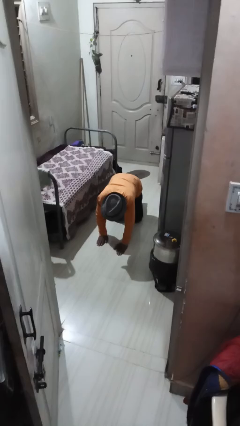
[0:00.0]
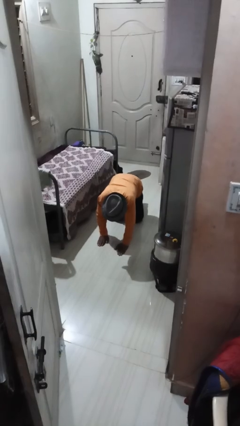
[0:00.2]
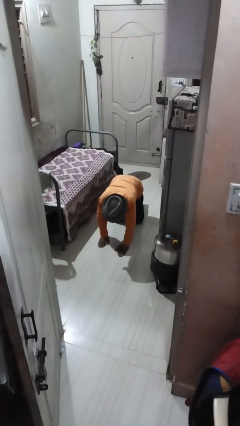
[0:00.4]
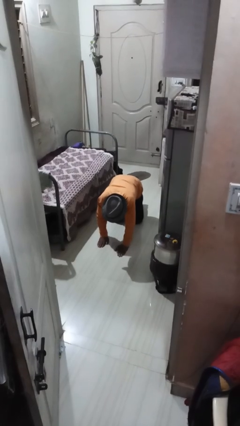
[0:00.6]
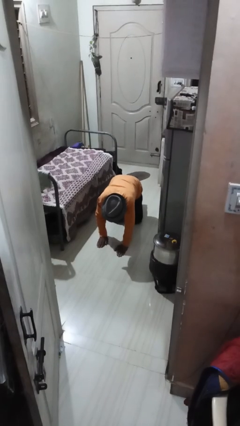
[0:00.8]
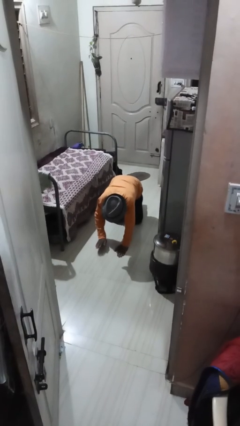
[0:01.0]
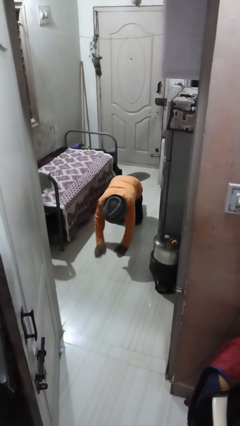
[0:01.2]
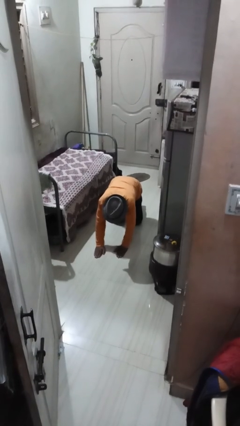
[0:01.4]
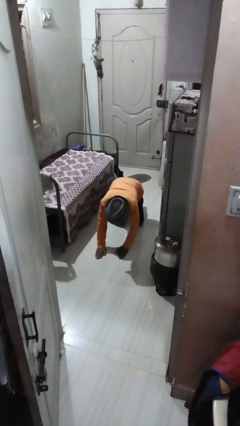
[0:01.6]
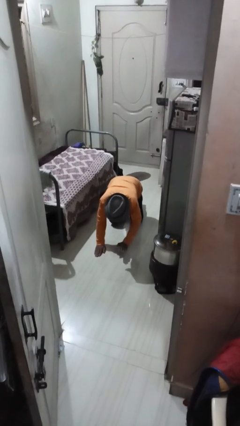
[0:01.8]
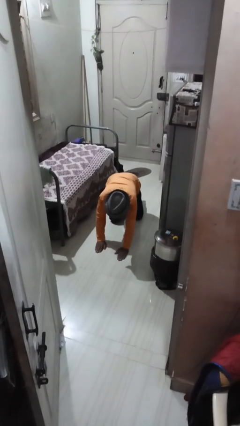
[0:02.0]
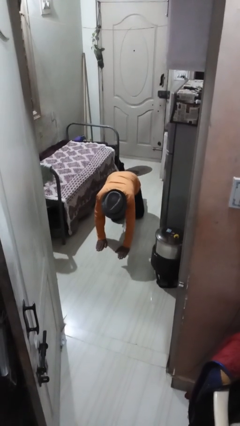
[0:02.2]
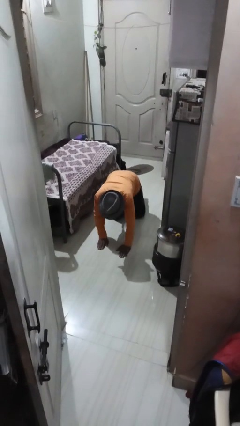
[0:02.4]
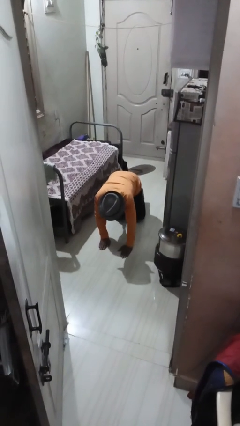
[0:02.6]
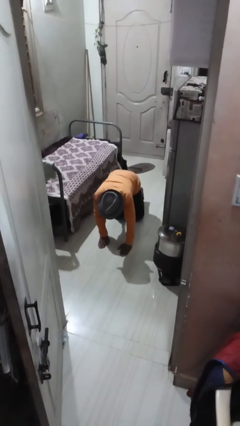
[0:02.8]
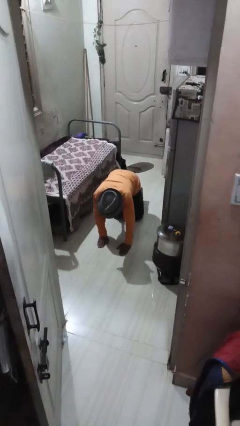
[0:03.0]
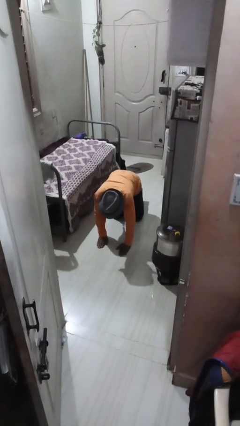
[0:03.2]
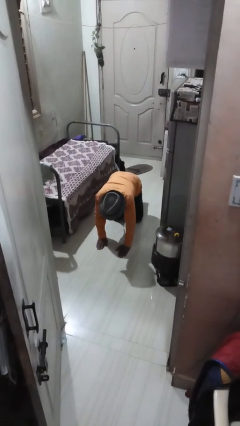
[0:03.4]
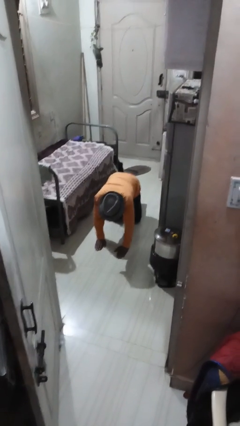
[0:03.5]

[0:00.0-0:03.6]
person crawls

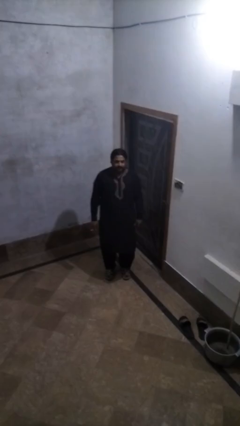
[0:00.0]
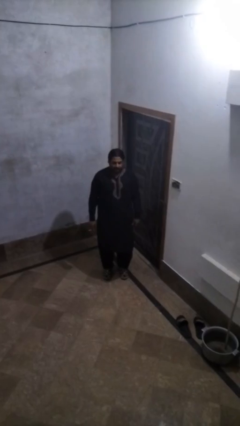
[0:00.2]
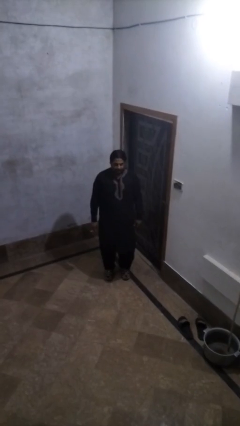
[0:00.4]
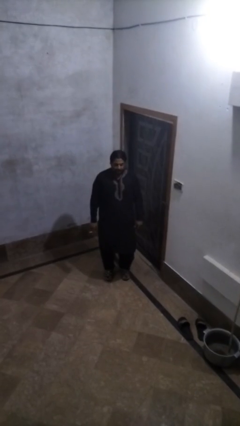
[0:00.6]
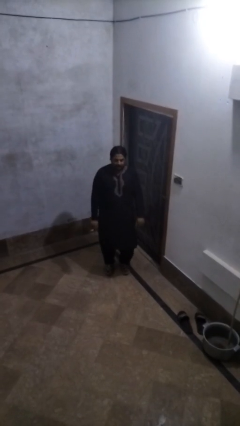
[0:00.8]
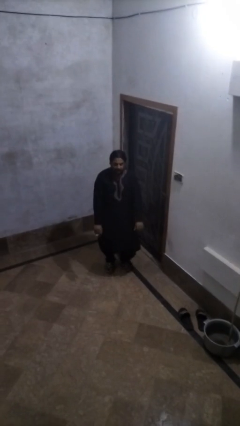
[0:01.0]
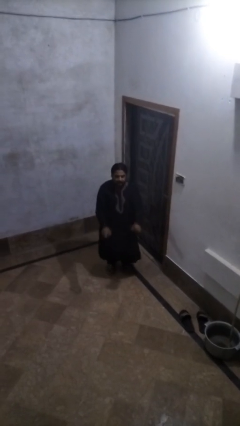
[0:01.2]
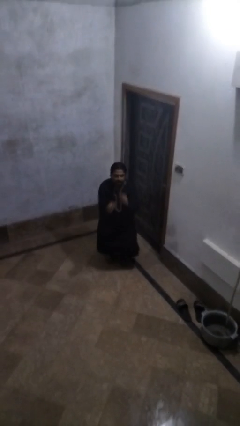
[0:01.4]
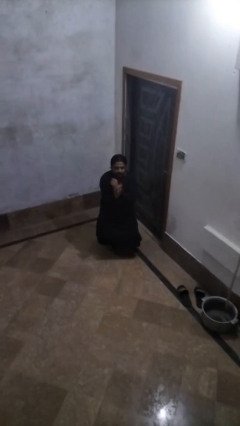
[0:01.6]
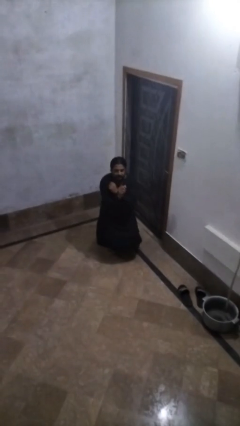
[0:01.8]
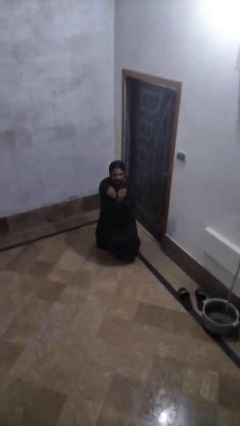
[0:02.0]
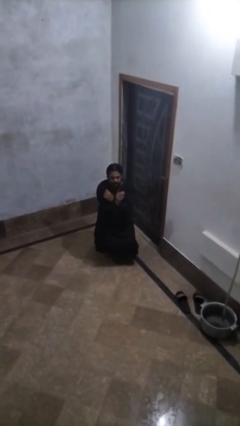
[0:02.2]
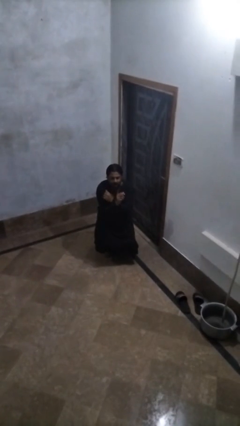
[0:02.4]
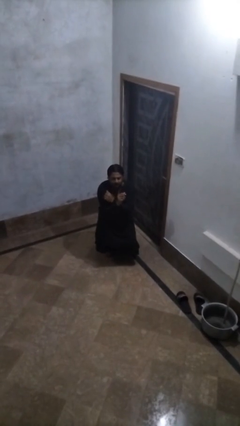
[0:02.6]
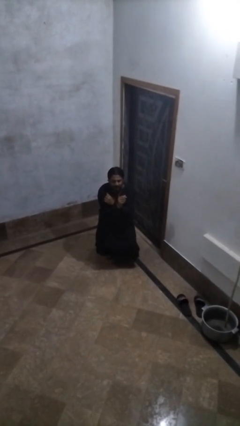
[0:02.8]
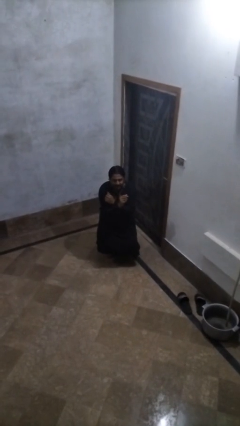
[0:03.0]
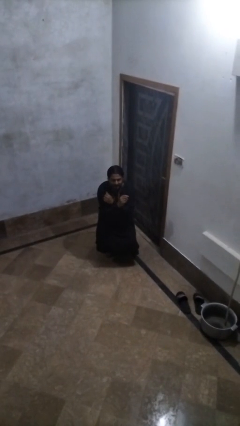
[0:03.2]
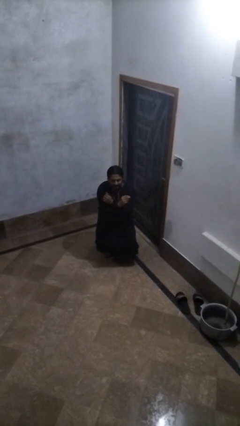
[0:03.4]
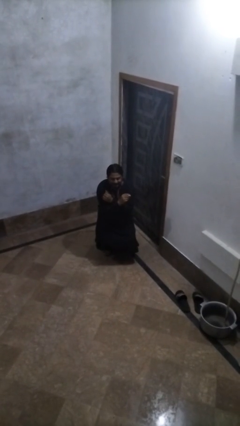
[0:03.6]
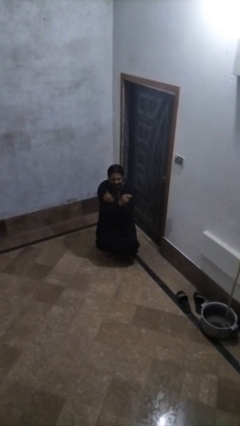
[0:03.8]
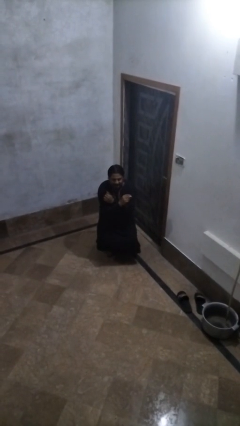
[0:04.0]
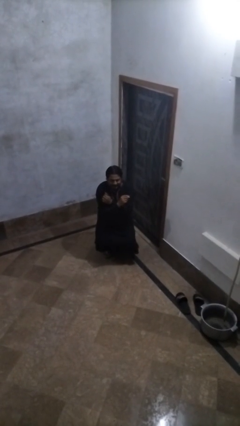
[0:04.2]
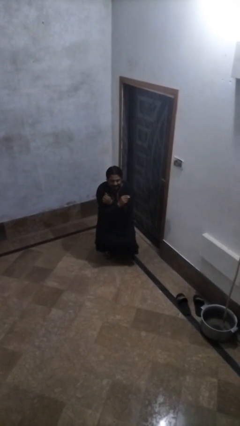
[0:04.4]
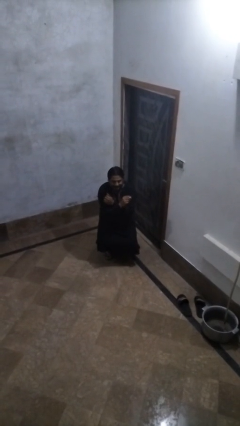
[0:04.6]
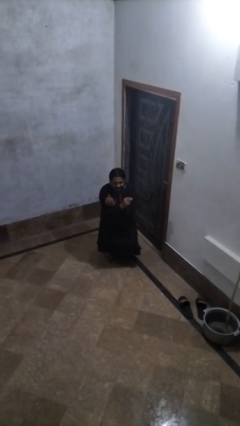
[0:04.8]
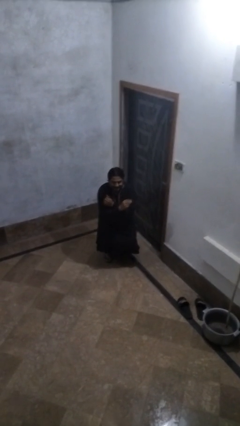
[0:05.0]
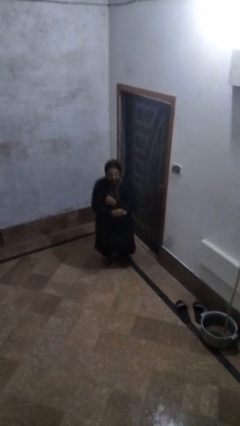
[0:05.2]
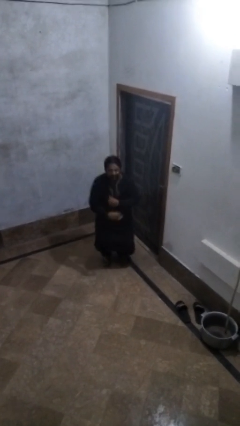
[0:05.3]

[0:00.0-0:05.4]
person squats

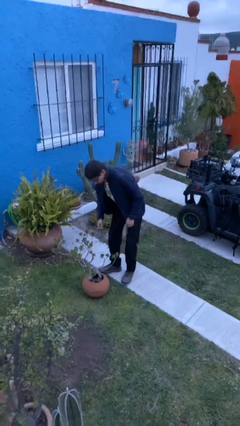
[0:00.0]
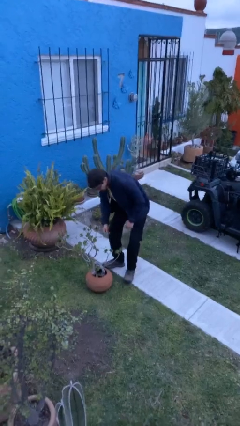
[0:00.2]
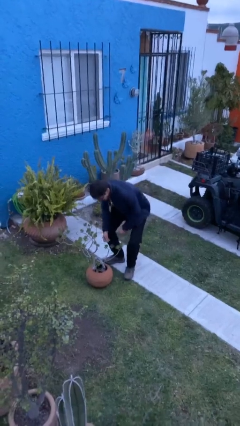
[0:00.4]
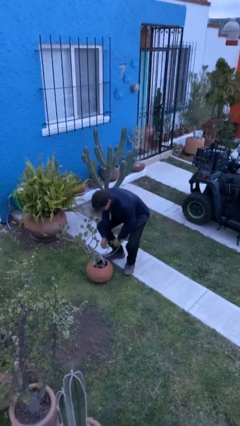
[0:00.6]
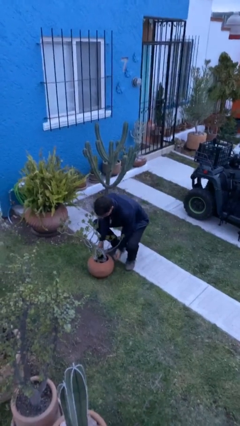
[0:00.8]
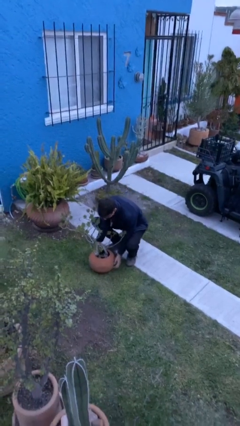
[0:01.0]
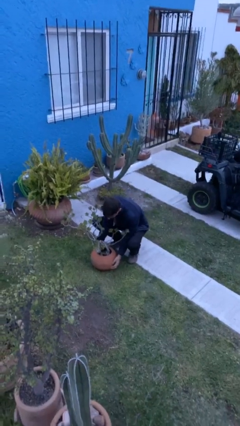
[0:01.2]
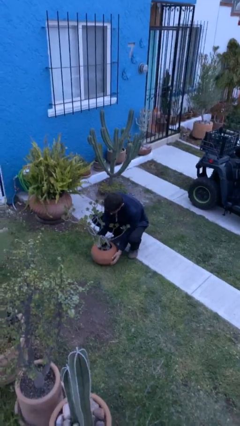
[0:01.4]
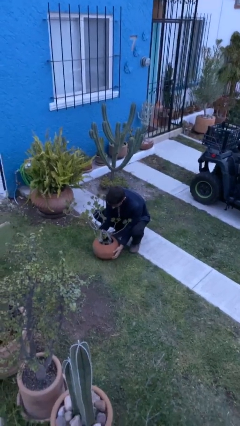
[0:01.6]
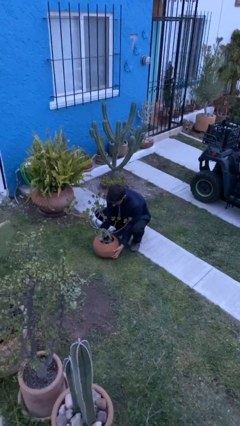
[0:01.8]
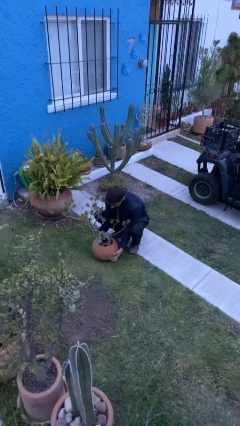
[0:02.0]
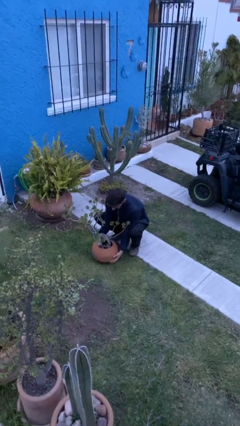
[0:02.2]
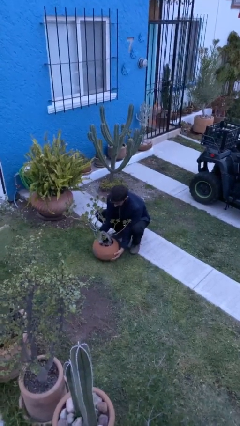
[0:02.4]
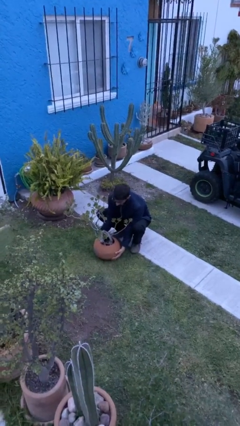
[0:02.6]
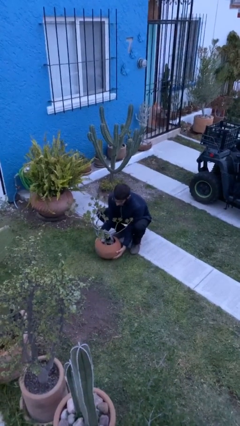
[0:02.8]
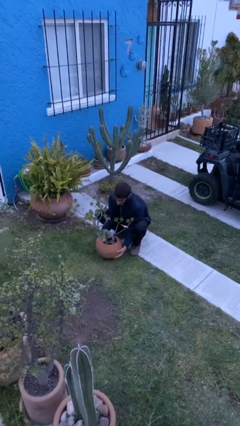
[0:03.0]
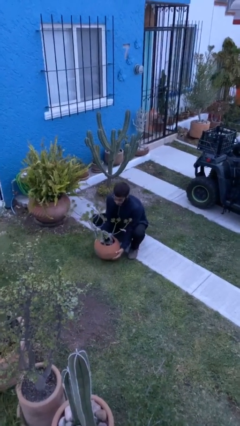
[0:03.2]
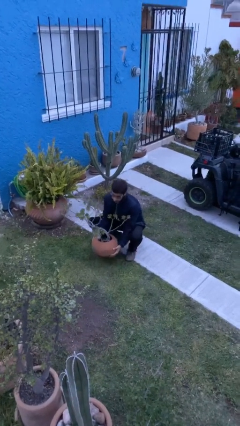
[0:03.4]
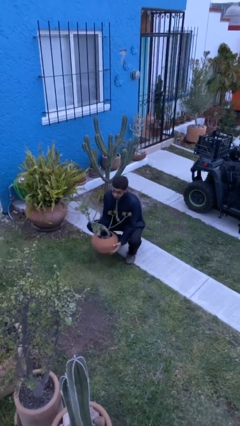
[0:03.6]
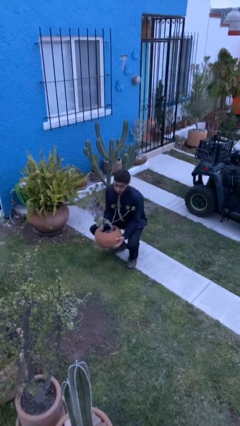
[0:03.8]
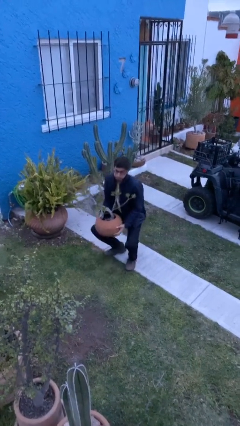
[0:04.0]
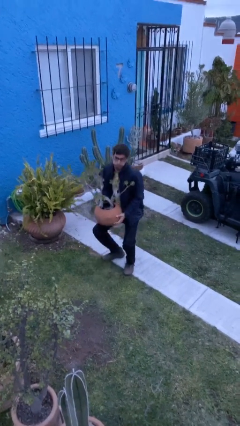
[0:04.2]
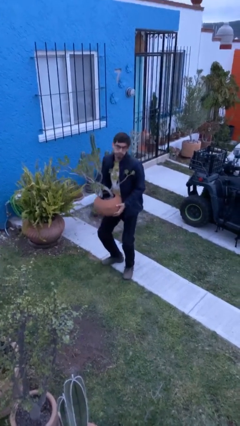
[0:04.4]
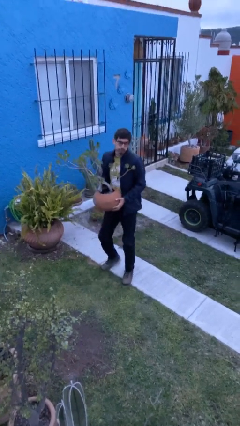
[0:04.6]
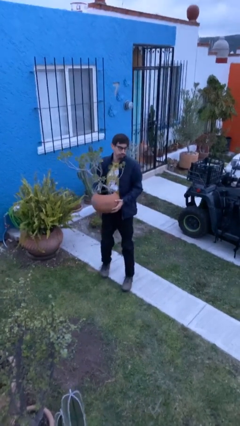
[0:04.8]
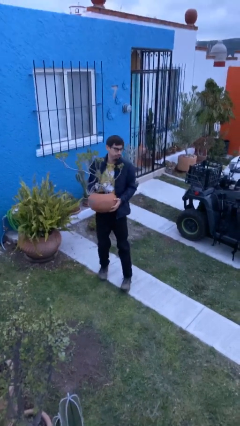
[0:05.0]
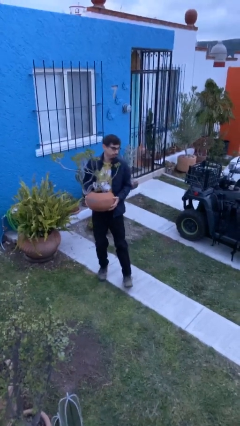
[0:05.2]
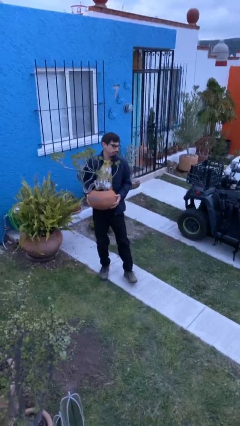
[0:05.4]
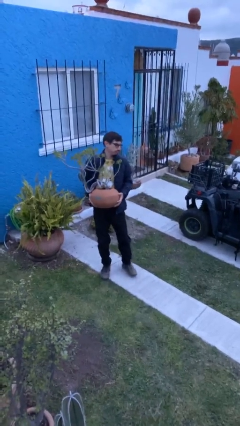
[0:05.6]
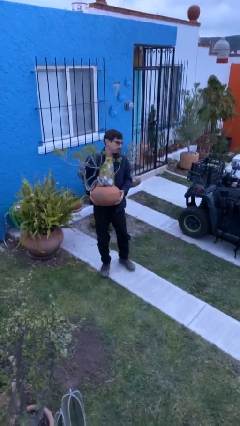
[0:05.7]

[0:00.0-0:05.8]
person picks up object from floor

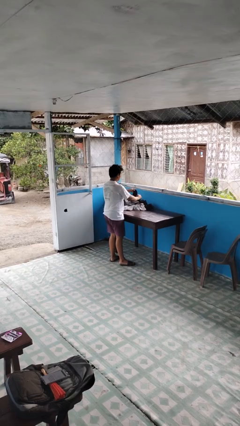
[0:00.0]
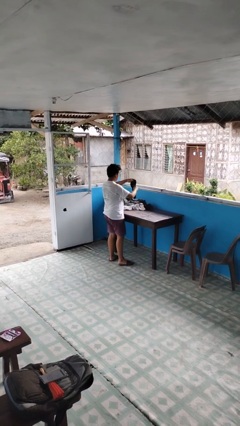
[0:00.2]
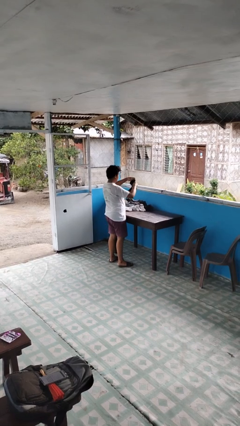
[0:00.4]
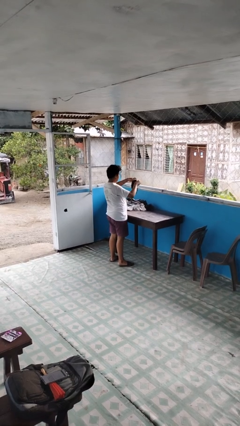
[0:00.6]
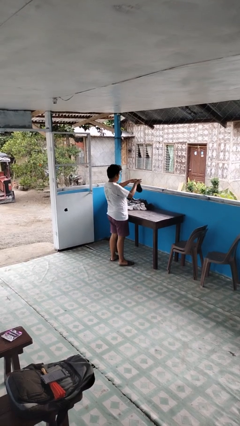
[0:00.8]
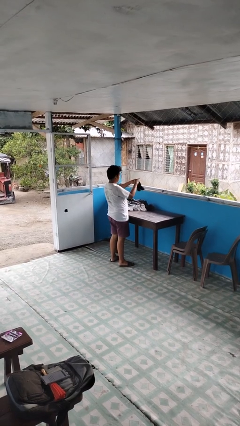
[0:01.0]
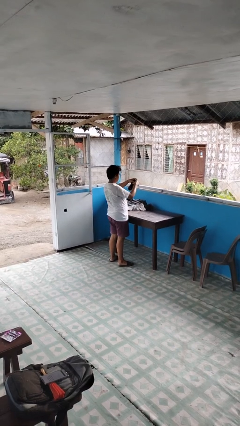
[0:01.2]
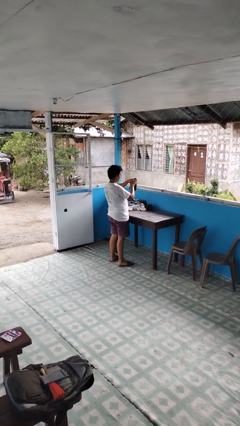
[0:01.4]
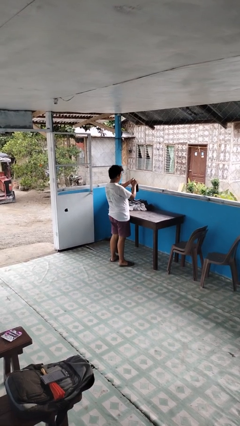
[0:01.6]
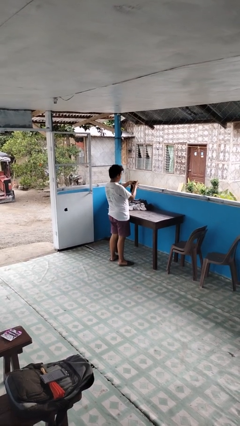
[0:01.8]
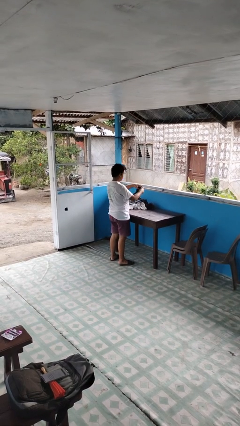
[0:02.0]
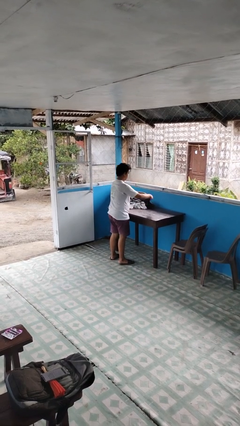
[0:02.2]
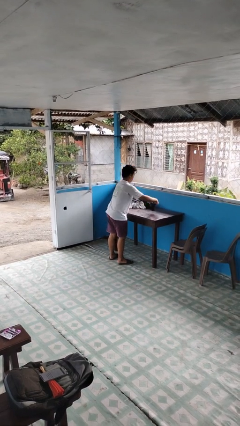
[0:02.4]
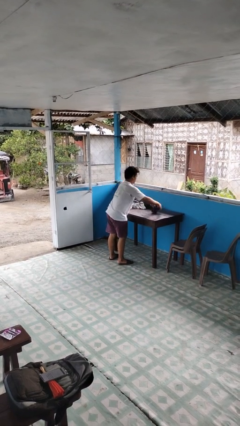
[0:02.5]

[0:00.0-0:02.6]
person folds socks

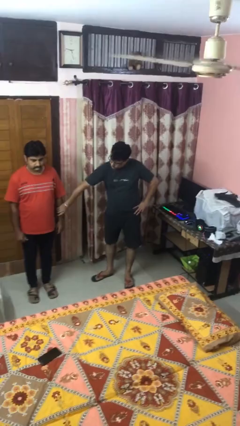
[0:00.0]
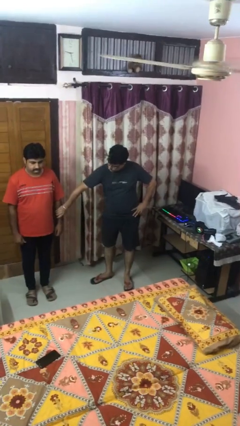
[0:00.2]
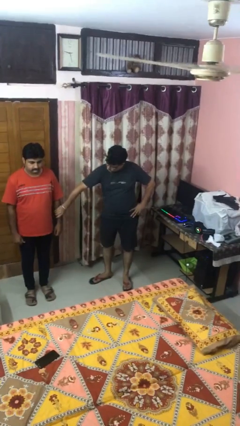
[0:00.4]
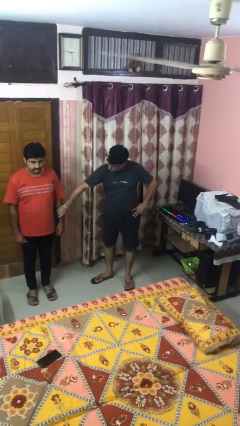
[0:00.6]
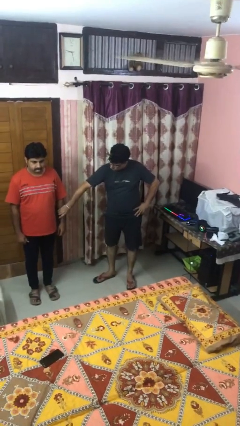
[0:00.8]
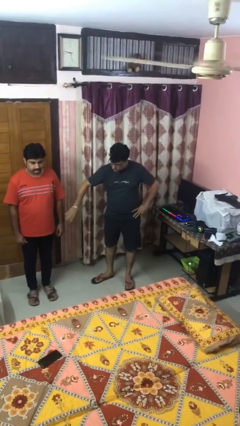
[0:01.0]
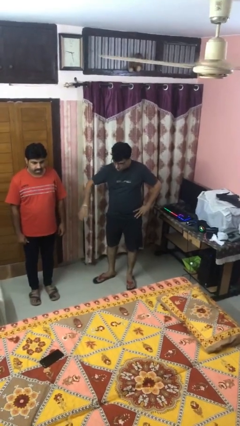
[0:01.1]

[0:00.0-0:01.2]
person grabs person by forearm
